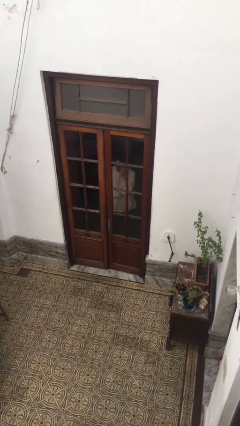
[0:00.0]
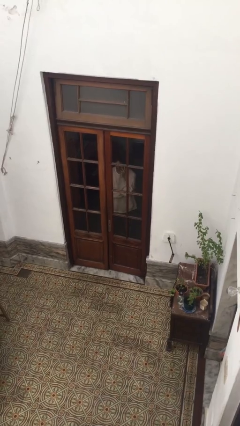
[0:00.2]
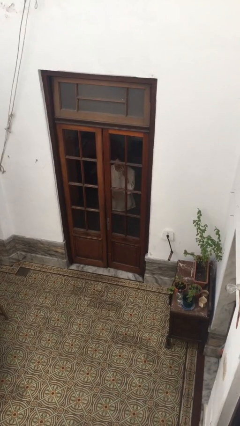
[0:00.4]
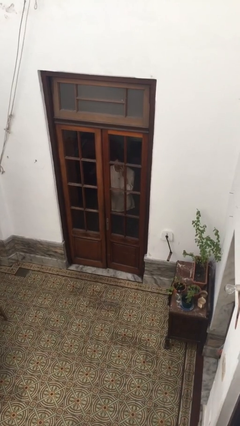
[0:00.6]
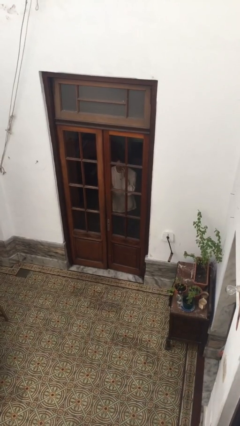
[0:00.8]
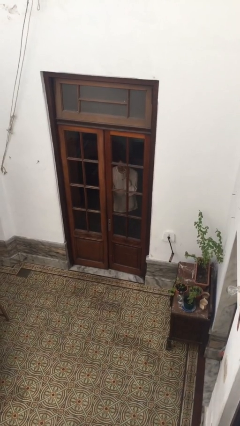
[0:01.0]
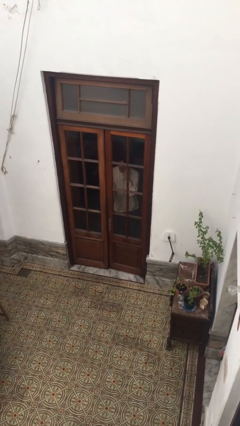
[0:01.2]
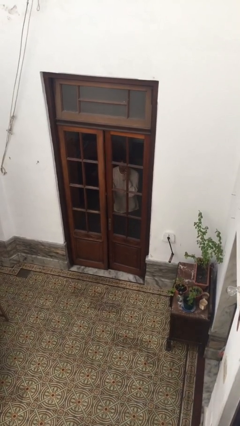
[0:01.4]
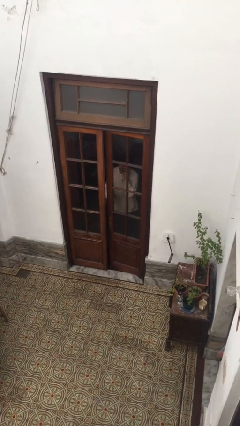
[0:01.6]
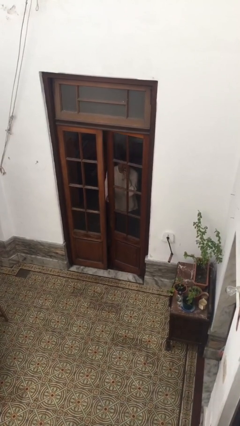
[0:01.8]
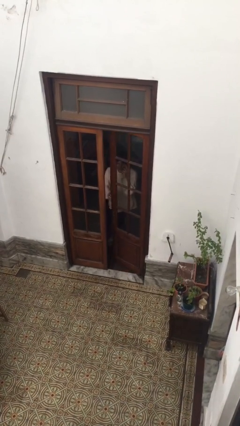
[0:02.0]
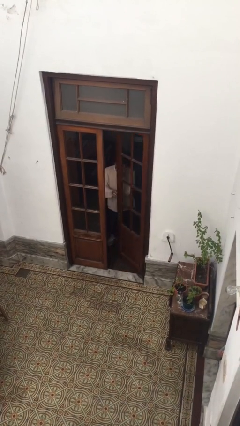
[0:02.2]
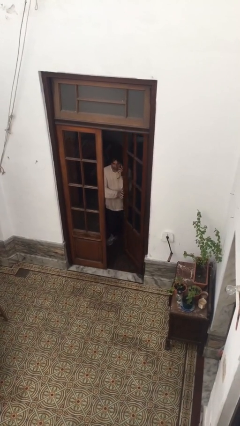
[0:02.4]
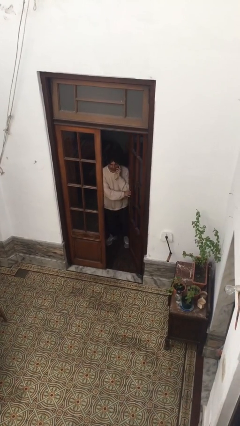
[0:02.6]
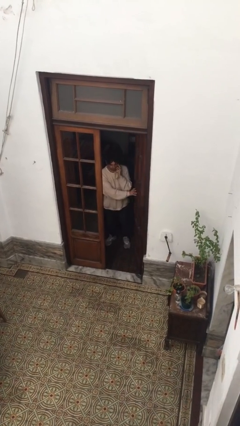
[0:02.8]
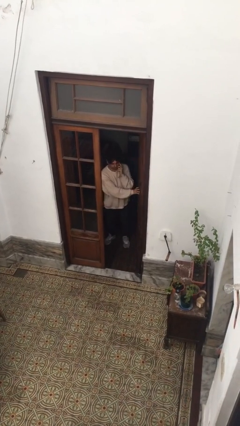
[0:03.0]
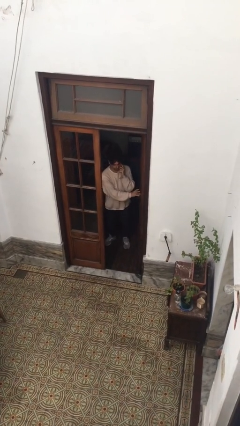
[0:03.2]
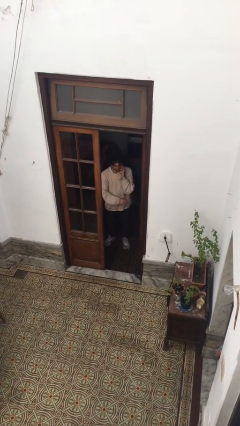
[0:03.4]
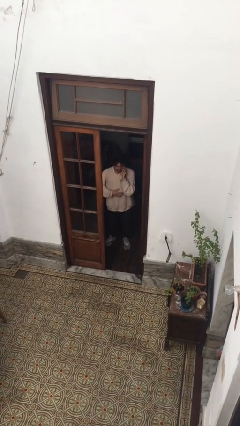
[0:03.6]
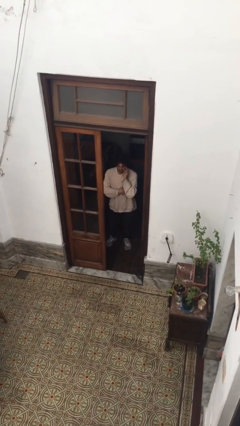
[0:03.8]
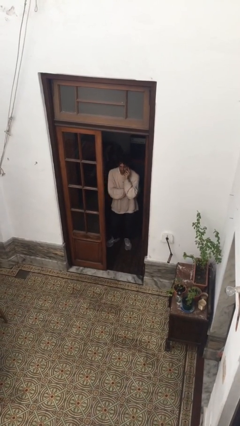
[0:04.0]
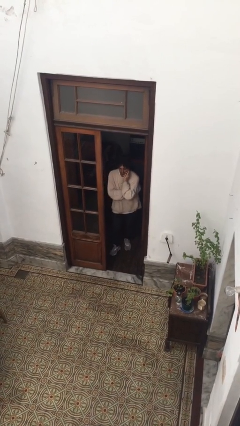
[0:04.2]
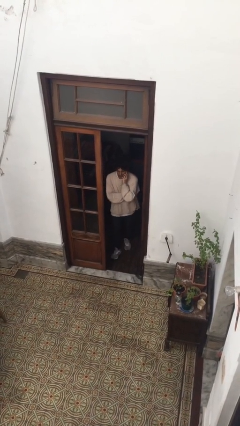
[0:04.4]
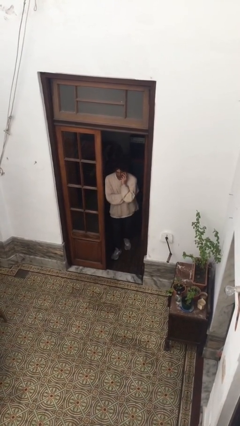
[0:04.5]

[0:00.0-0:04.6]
person opens facility door

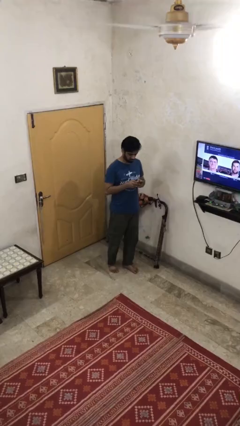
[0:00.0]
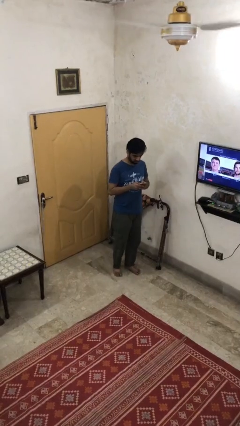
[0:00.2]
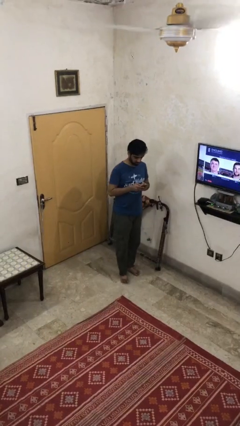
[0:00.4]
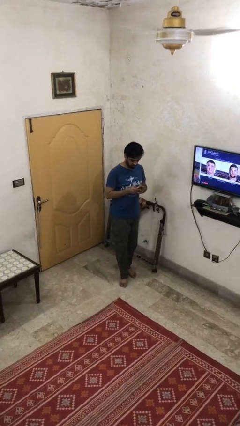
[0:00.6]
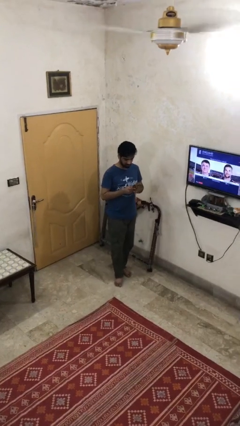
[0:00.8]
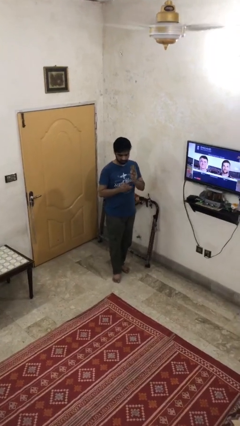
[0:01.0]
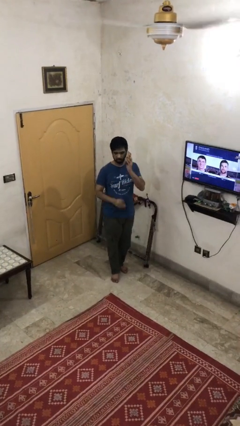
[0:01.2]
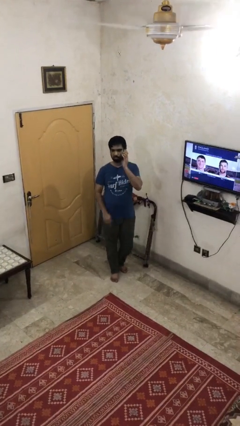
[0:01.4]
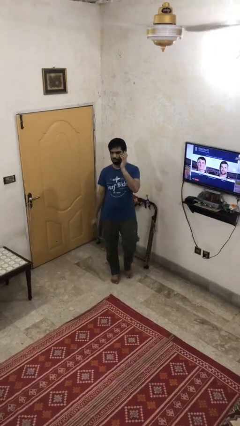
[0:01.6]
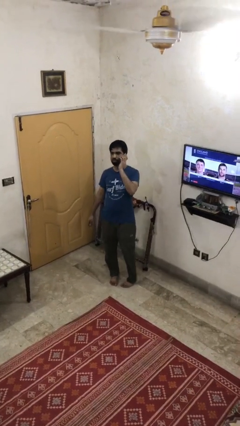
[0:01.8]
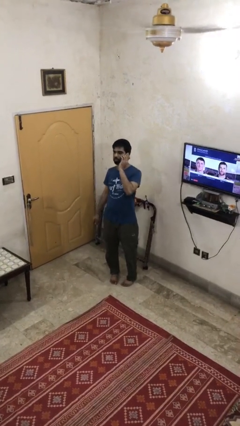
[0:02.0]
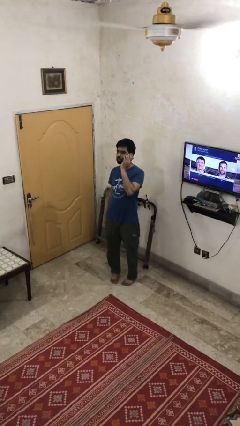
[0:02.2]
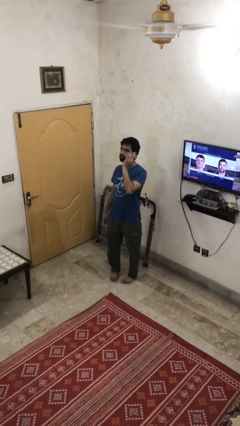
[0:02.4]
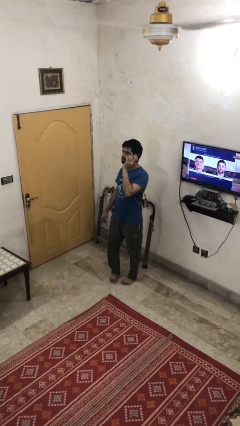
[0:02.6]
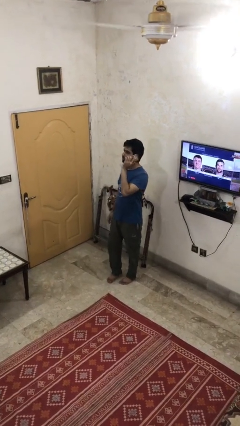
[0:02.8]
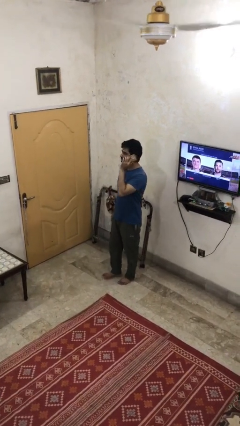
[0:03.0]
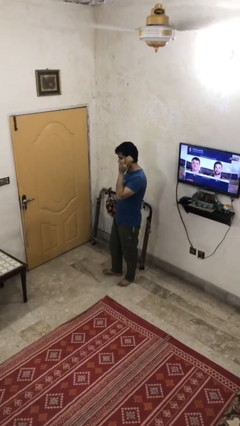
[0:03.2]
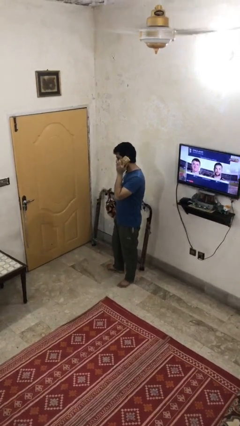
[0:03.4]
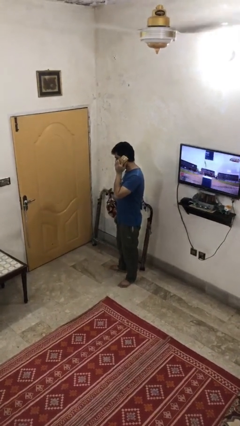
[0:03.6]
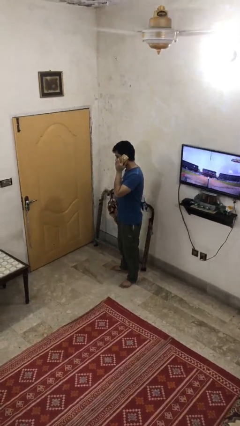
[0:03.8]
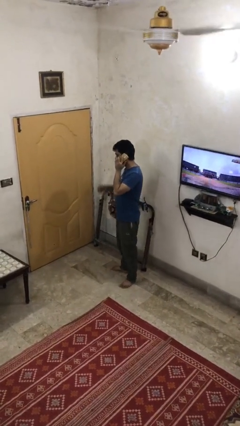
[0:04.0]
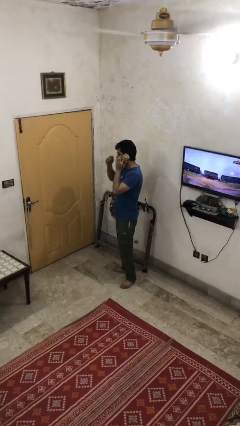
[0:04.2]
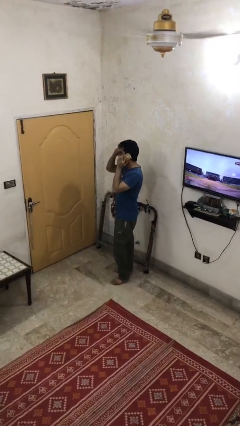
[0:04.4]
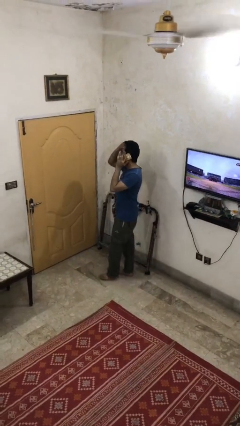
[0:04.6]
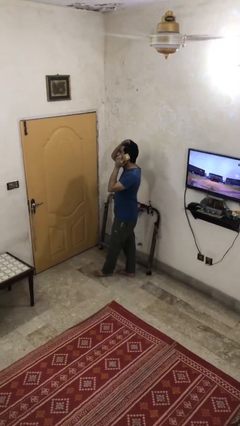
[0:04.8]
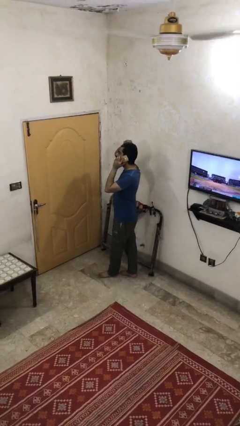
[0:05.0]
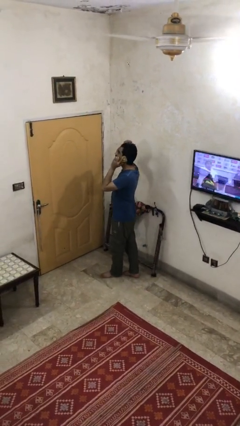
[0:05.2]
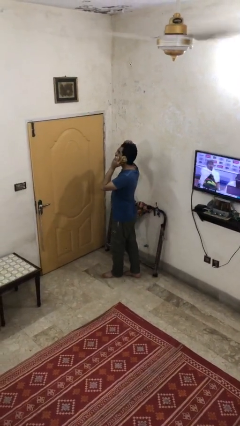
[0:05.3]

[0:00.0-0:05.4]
person talks on phone

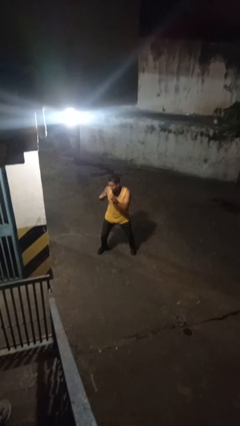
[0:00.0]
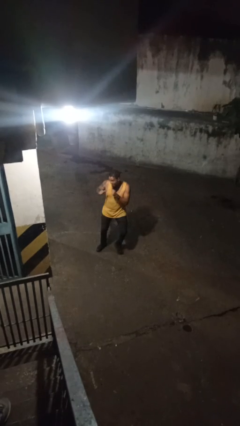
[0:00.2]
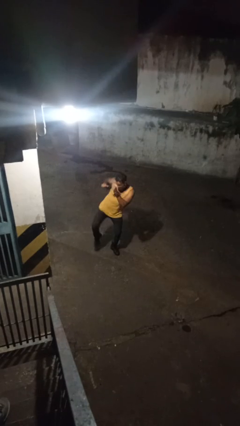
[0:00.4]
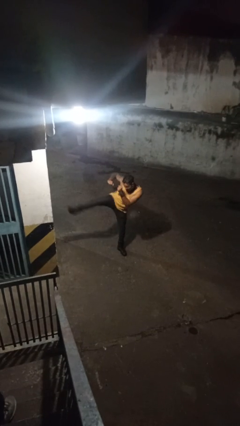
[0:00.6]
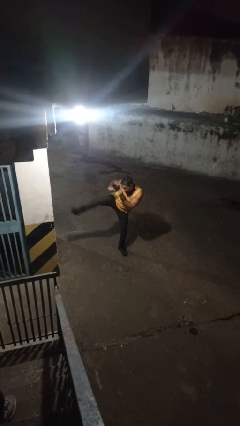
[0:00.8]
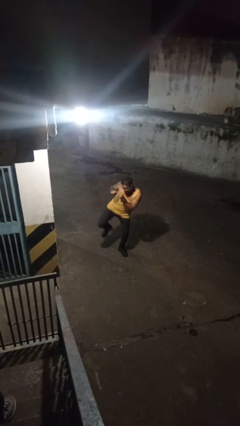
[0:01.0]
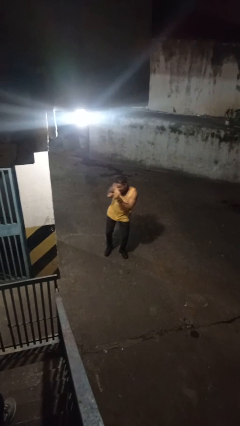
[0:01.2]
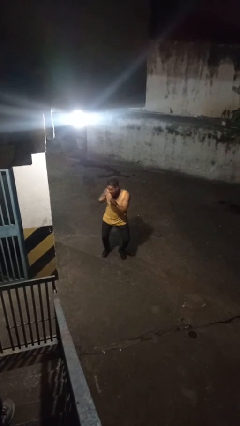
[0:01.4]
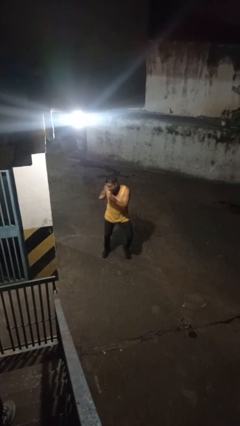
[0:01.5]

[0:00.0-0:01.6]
person karate kicks

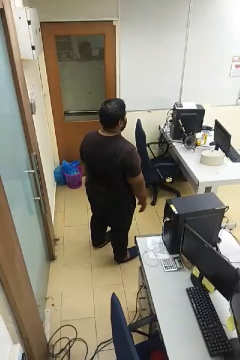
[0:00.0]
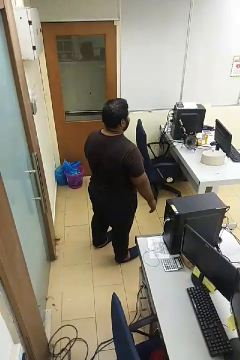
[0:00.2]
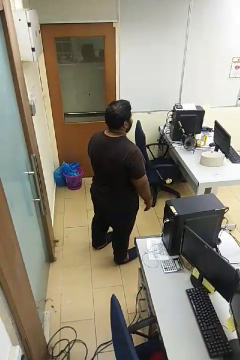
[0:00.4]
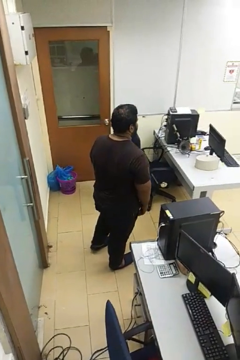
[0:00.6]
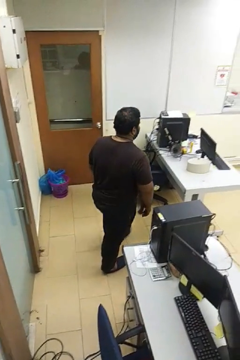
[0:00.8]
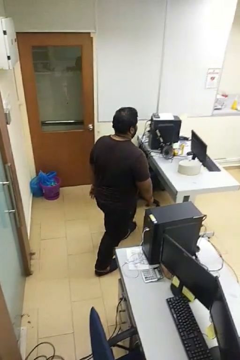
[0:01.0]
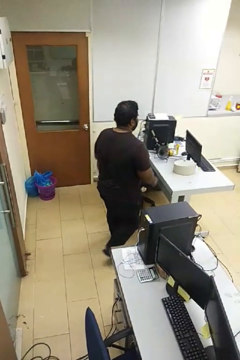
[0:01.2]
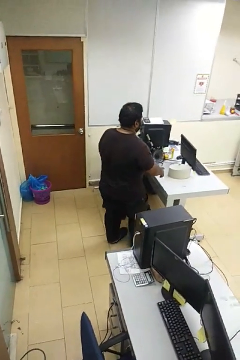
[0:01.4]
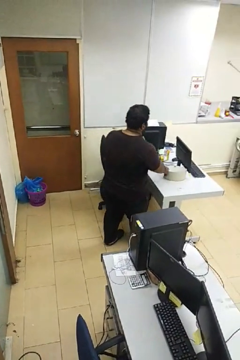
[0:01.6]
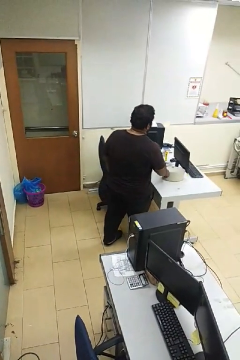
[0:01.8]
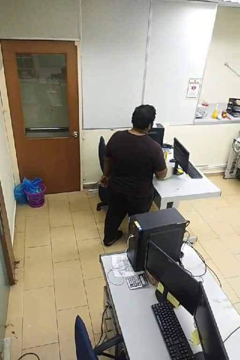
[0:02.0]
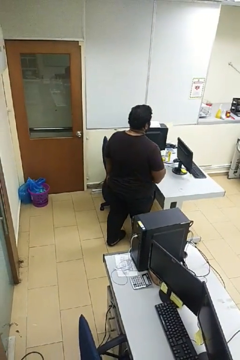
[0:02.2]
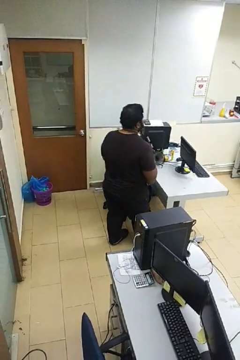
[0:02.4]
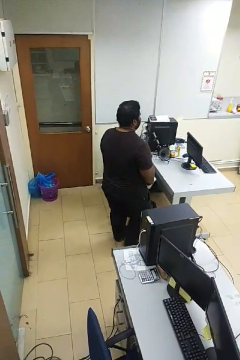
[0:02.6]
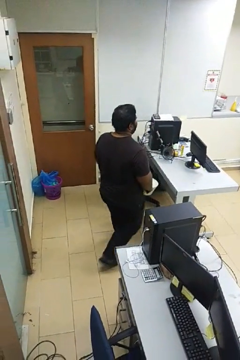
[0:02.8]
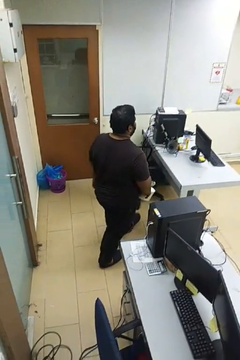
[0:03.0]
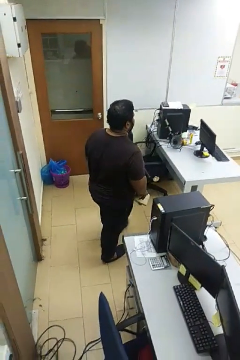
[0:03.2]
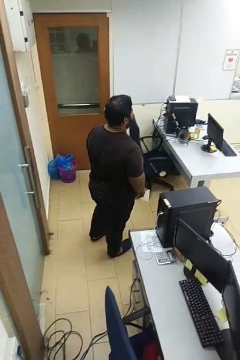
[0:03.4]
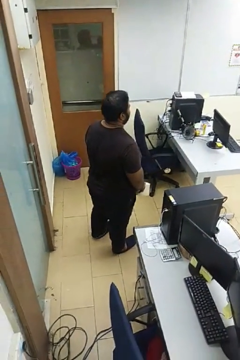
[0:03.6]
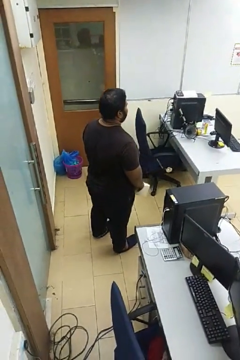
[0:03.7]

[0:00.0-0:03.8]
person picks up object from table

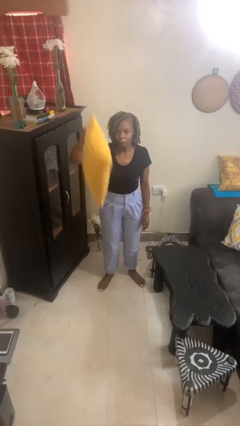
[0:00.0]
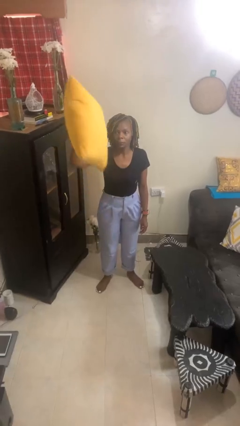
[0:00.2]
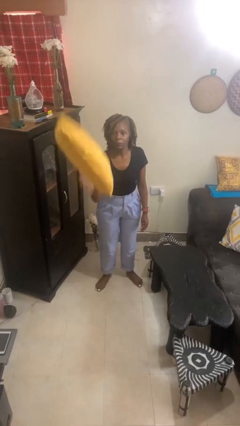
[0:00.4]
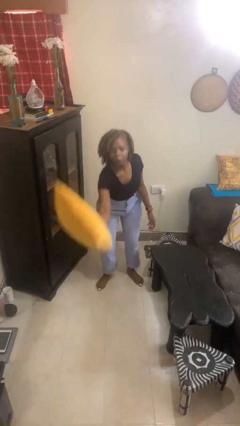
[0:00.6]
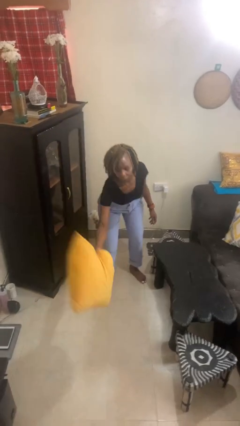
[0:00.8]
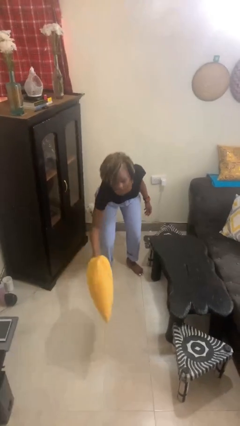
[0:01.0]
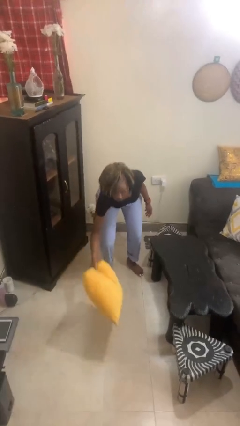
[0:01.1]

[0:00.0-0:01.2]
person drops object

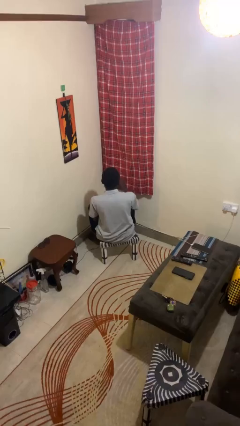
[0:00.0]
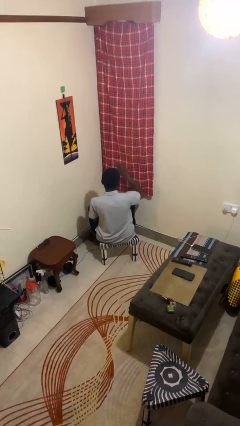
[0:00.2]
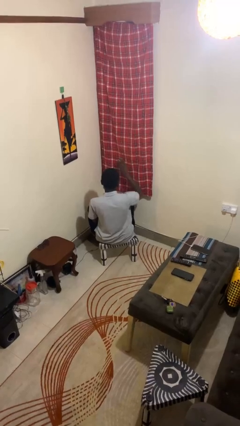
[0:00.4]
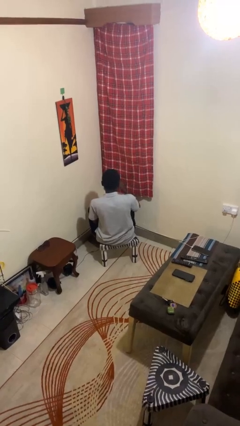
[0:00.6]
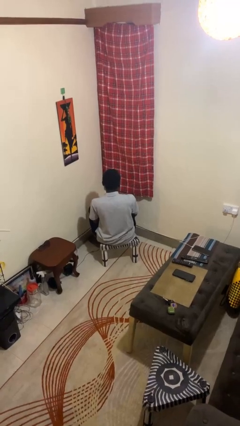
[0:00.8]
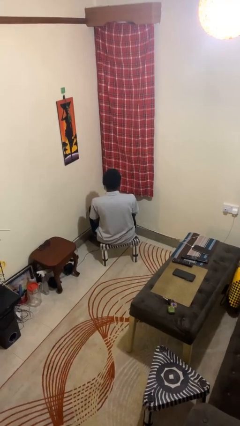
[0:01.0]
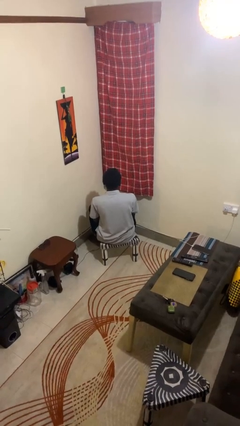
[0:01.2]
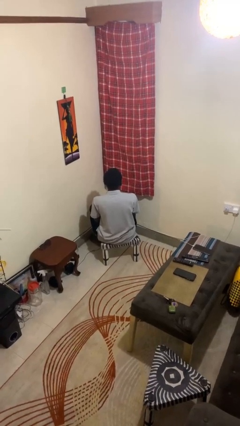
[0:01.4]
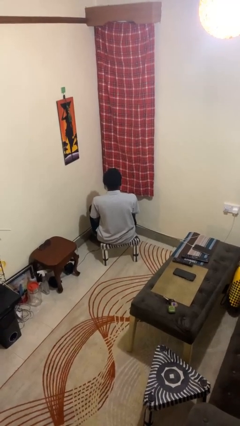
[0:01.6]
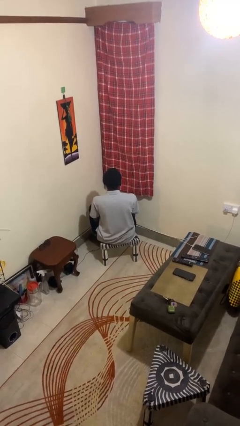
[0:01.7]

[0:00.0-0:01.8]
person gestures swipe down
